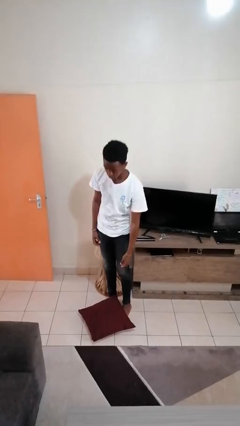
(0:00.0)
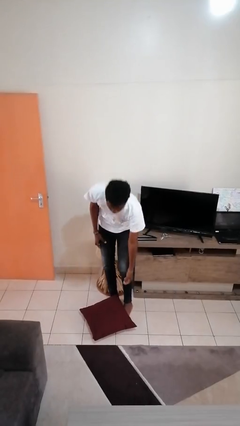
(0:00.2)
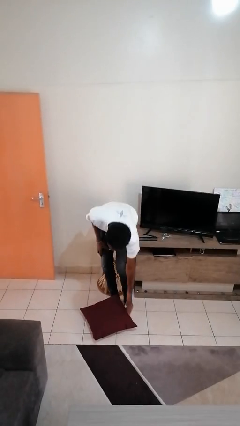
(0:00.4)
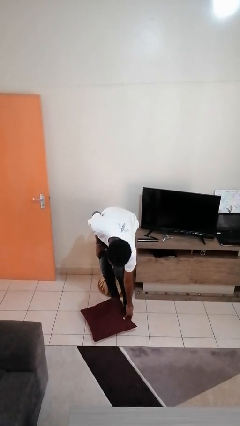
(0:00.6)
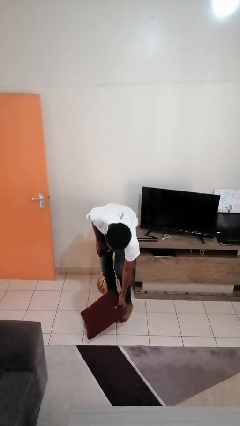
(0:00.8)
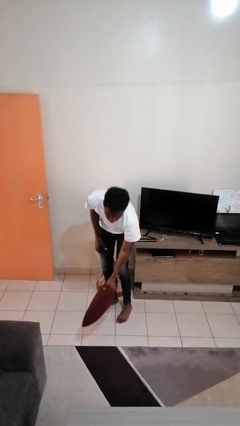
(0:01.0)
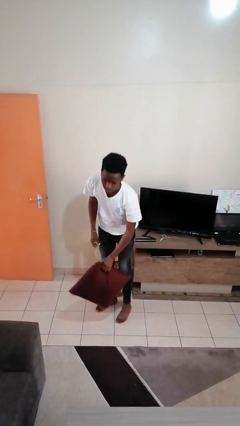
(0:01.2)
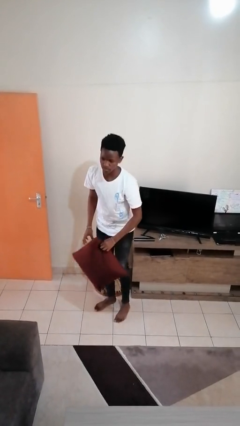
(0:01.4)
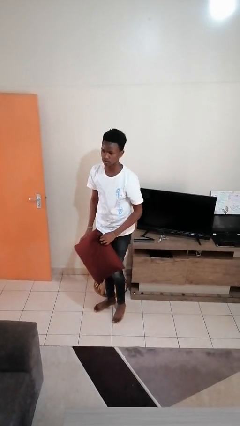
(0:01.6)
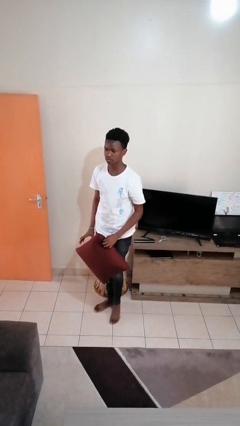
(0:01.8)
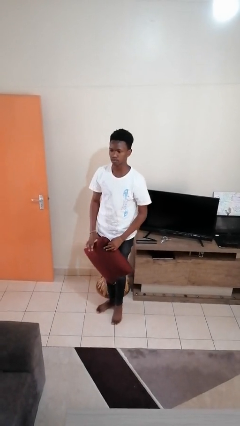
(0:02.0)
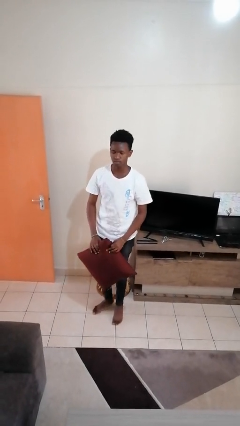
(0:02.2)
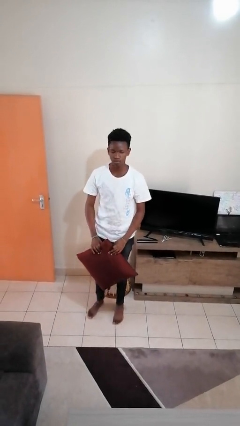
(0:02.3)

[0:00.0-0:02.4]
person picks up object from floor

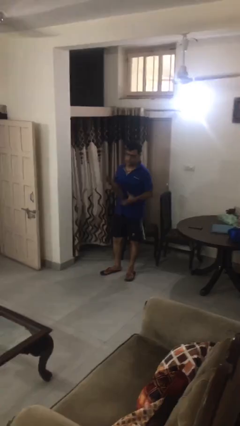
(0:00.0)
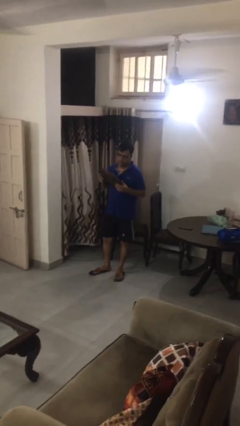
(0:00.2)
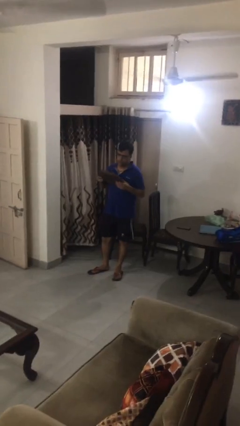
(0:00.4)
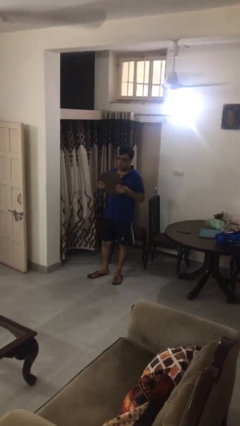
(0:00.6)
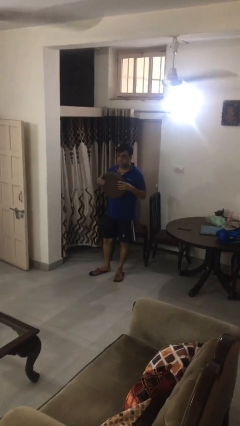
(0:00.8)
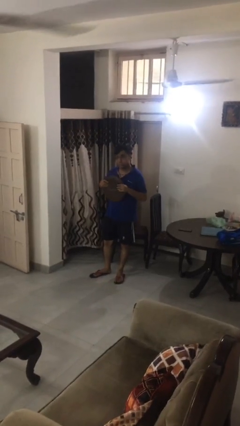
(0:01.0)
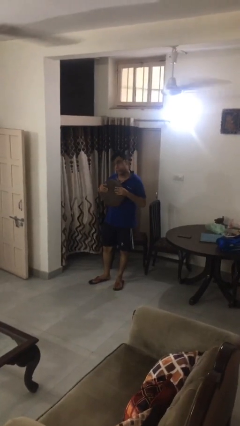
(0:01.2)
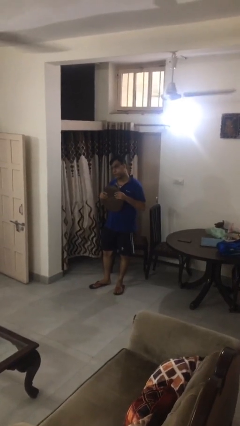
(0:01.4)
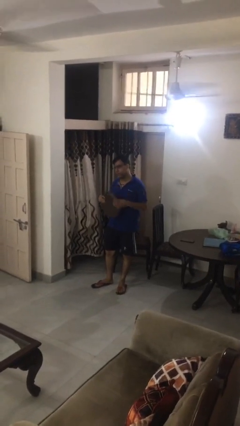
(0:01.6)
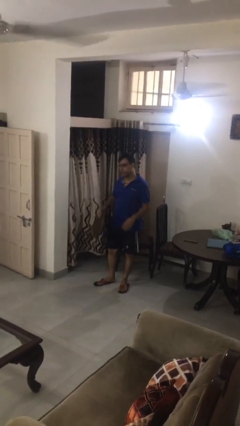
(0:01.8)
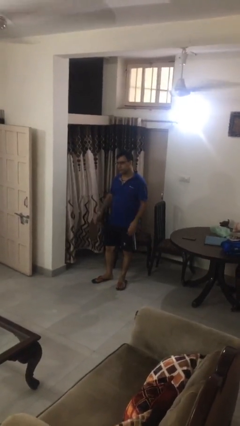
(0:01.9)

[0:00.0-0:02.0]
person squeezes object

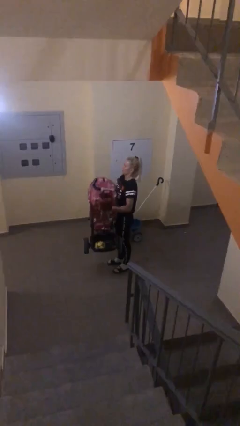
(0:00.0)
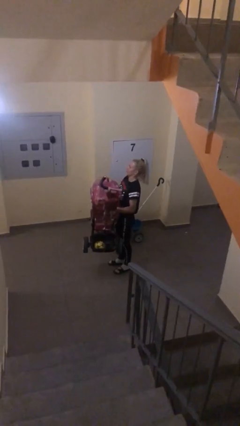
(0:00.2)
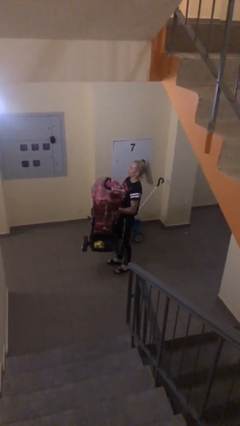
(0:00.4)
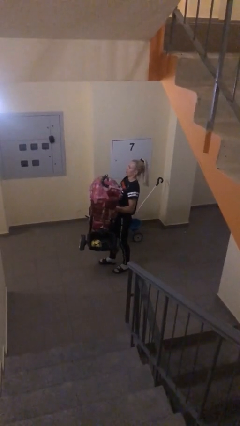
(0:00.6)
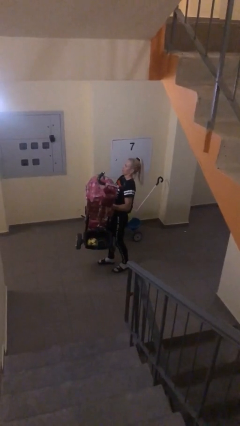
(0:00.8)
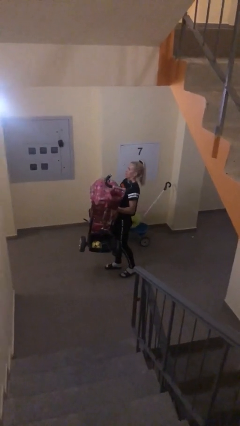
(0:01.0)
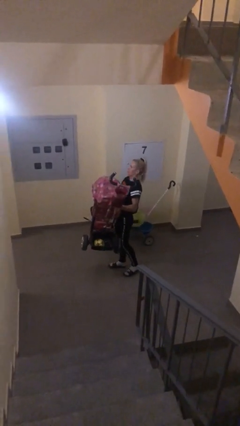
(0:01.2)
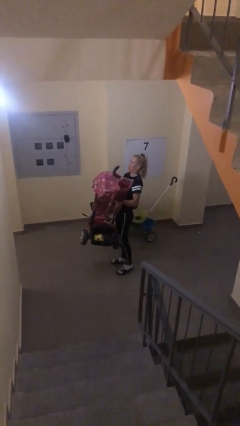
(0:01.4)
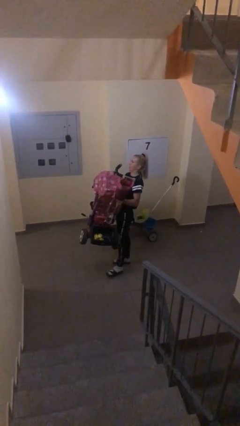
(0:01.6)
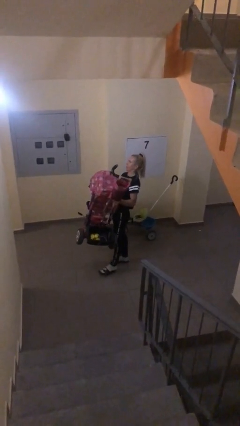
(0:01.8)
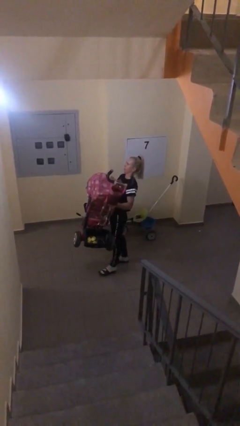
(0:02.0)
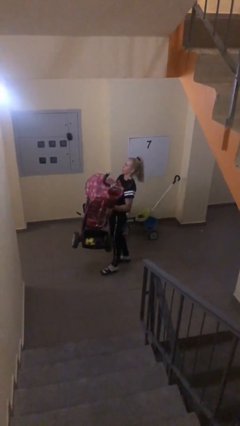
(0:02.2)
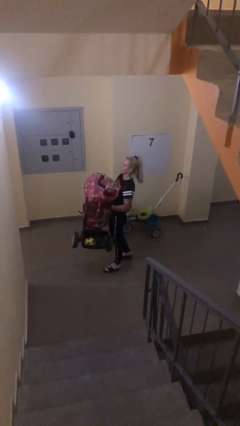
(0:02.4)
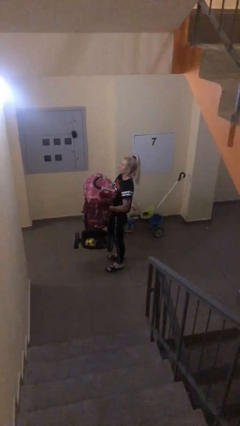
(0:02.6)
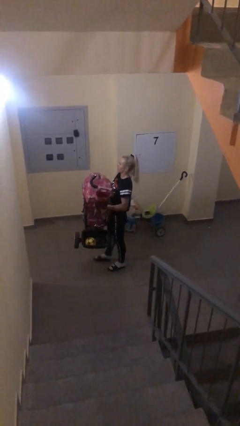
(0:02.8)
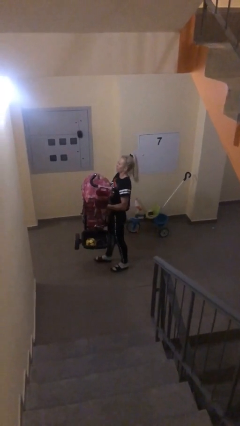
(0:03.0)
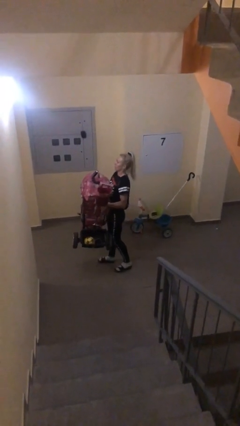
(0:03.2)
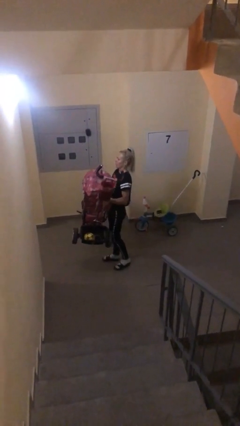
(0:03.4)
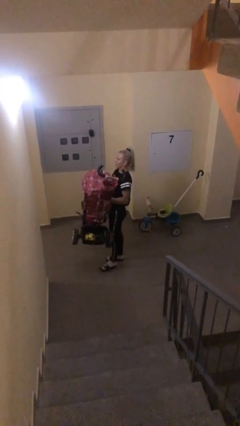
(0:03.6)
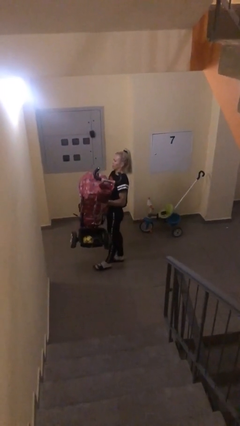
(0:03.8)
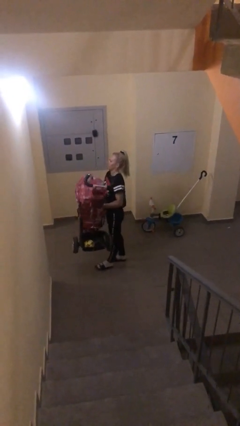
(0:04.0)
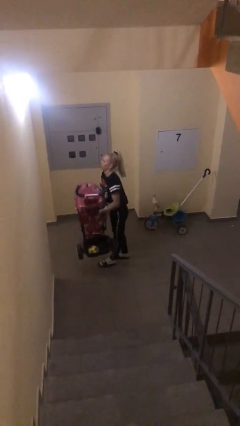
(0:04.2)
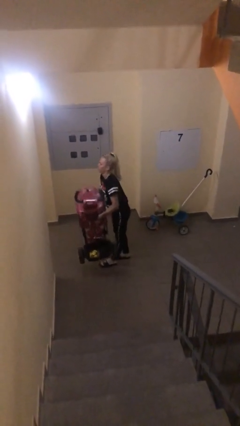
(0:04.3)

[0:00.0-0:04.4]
person carries heavy object

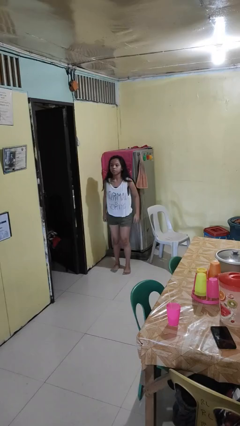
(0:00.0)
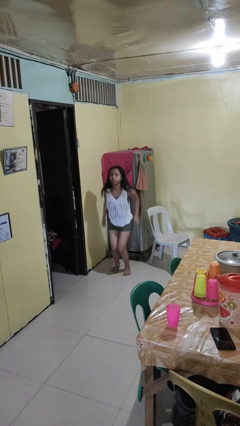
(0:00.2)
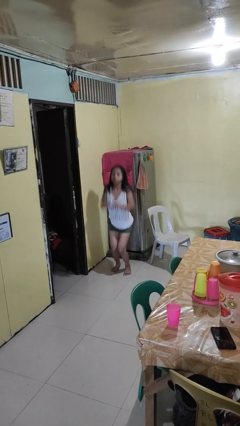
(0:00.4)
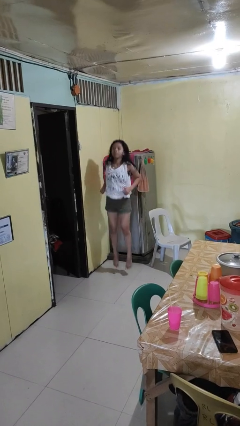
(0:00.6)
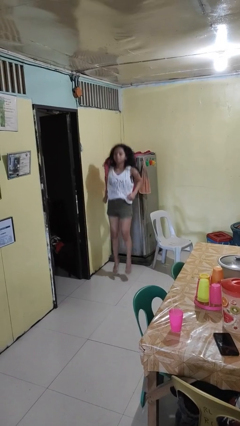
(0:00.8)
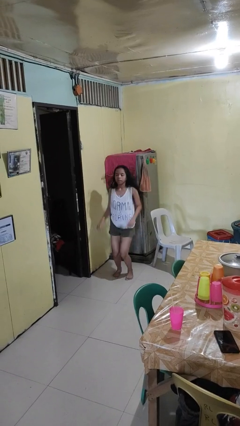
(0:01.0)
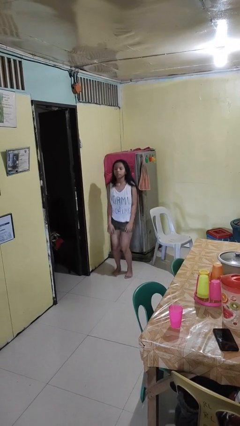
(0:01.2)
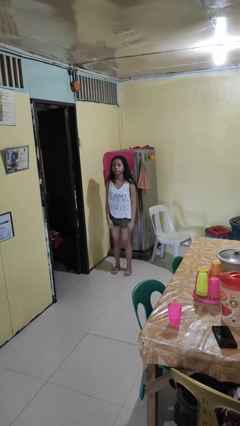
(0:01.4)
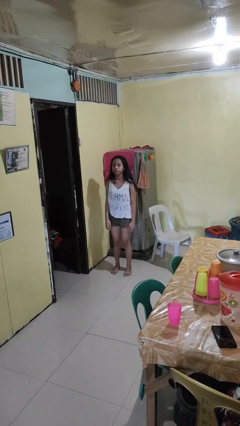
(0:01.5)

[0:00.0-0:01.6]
person jumps

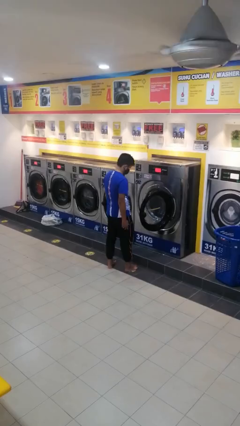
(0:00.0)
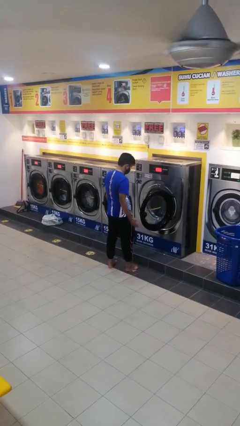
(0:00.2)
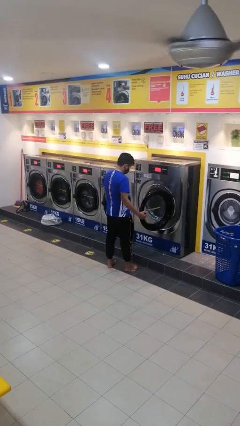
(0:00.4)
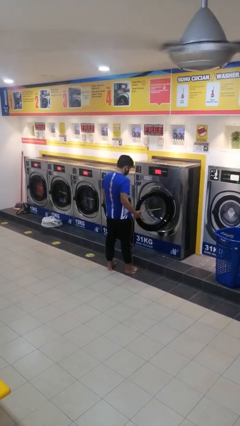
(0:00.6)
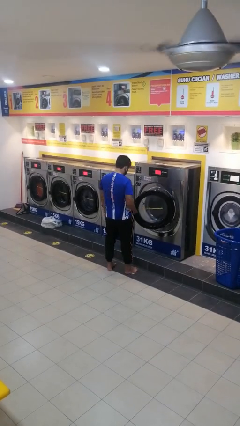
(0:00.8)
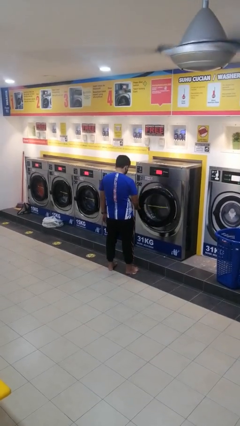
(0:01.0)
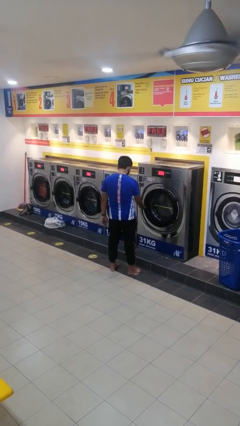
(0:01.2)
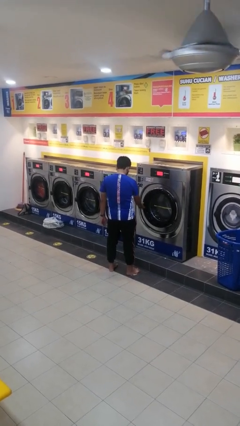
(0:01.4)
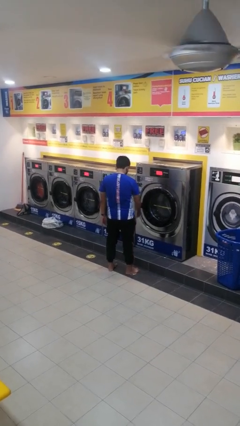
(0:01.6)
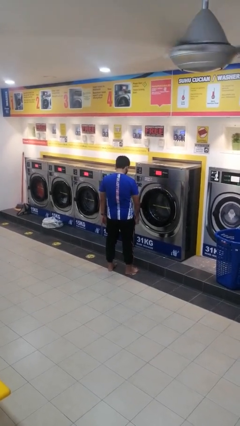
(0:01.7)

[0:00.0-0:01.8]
person closes clothes washer

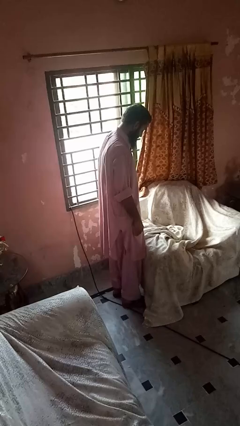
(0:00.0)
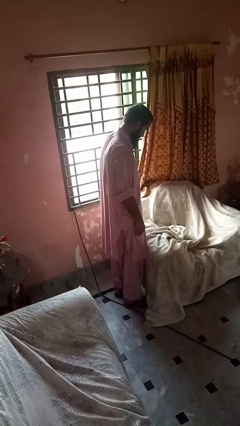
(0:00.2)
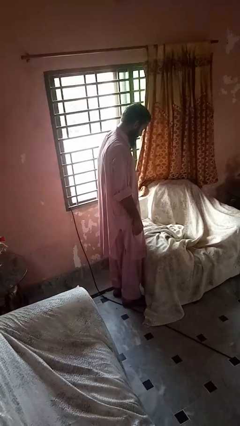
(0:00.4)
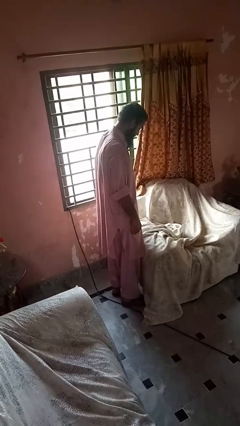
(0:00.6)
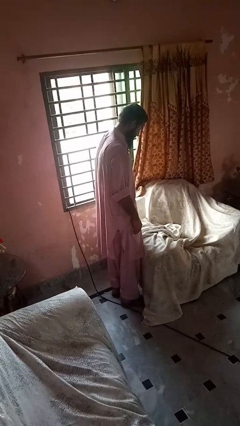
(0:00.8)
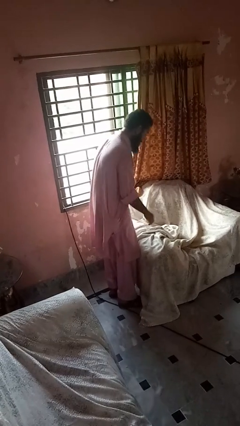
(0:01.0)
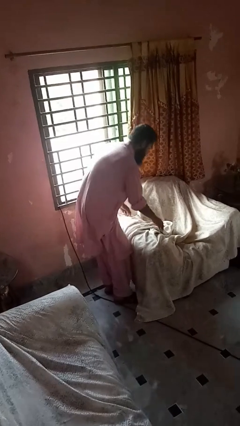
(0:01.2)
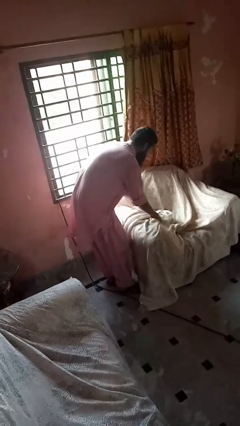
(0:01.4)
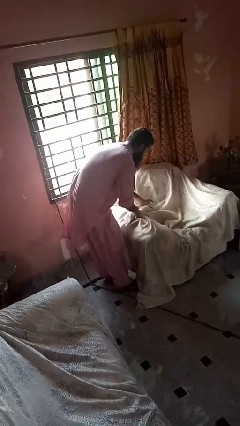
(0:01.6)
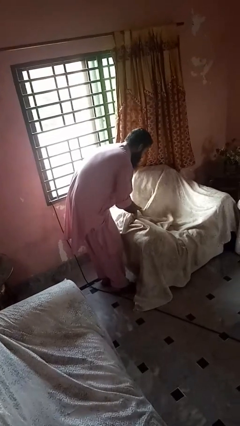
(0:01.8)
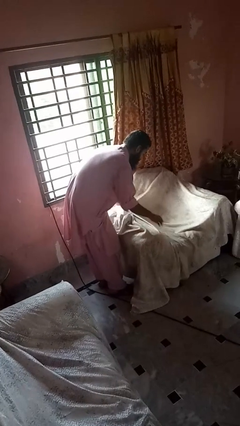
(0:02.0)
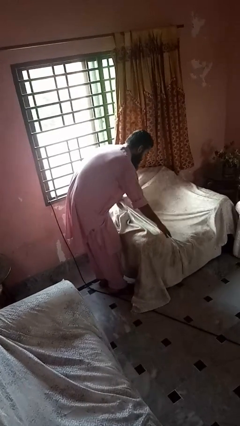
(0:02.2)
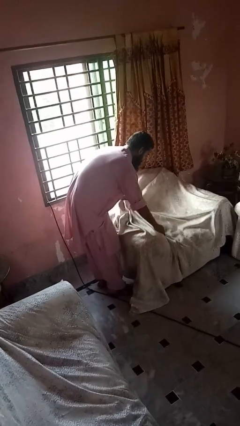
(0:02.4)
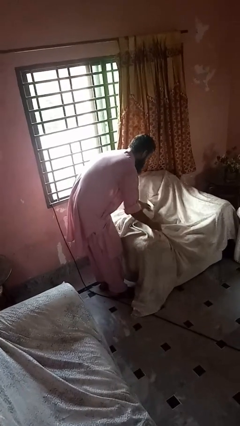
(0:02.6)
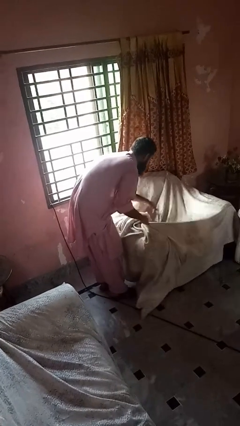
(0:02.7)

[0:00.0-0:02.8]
person searches in couch

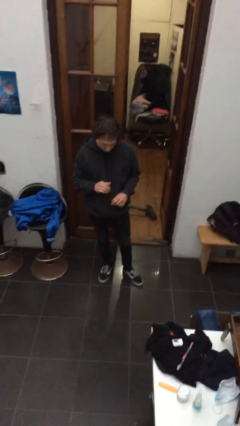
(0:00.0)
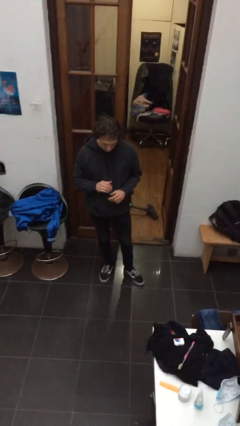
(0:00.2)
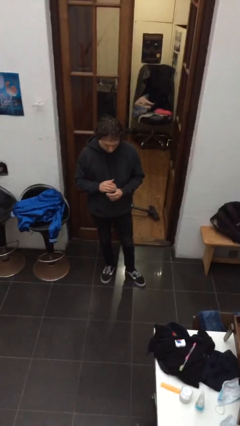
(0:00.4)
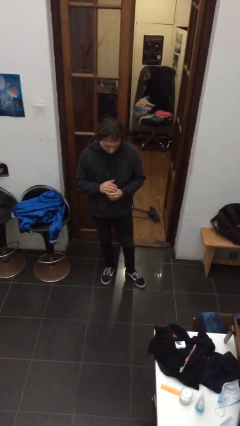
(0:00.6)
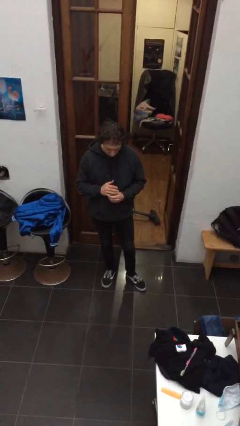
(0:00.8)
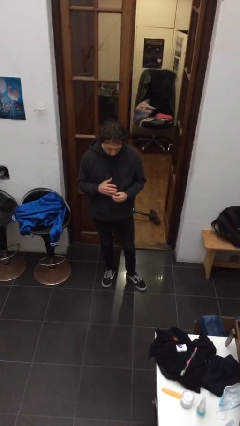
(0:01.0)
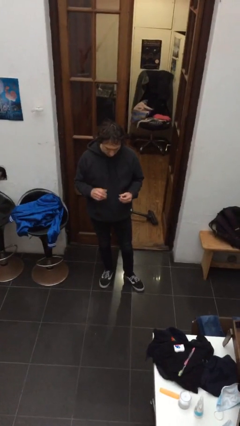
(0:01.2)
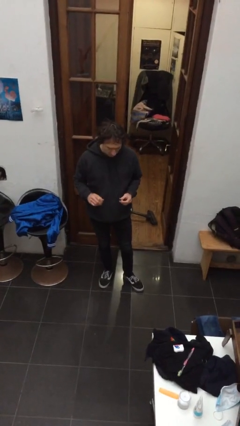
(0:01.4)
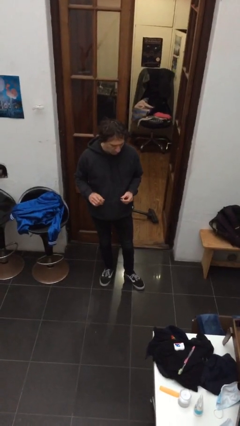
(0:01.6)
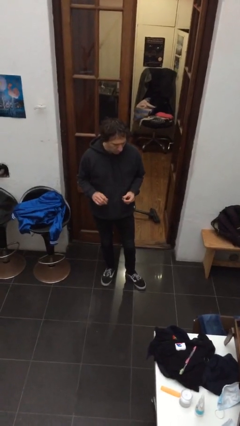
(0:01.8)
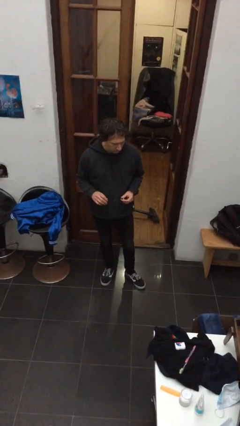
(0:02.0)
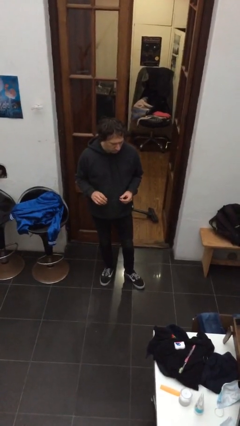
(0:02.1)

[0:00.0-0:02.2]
person takes off ring

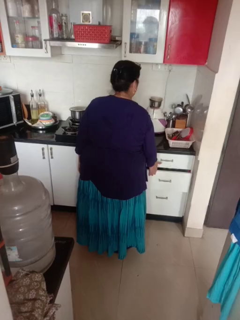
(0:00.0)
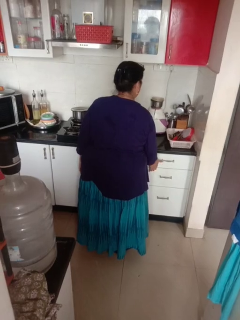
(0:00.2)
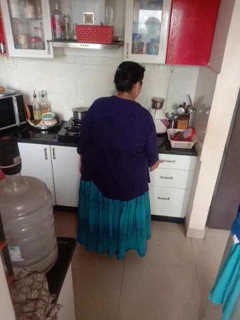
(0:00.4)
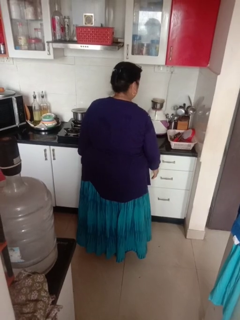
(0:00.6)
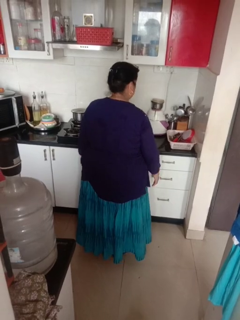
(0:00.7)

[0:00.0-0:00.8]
person closes kitchen drawer
